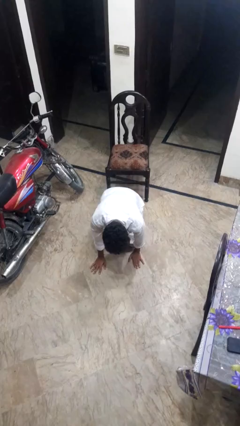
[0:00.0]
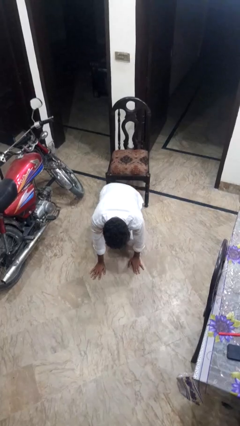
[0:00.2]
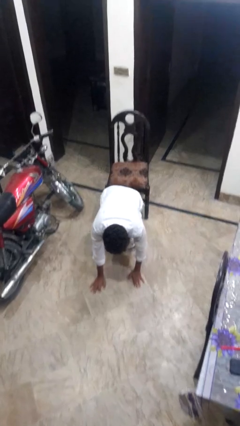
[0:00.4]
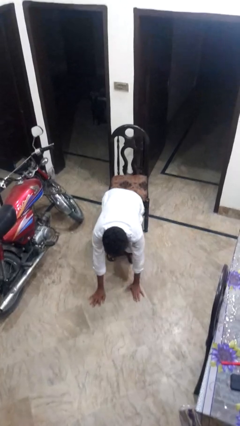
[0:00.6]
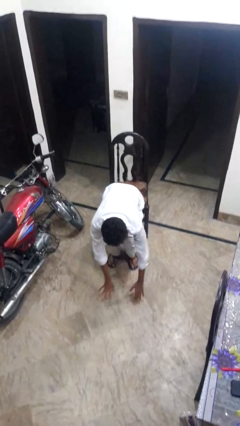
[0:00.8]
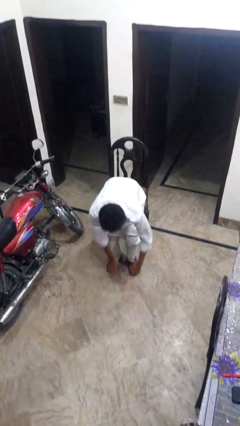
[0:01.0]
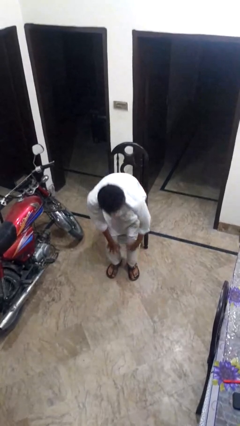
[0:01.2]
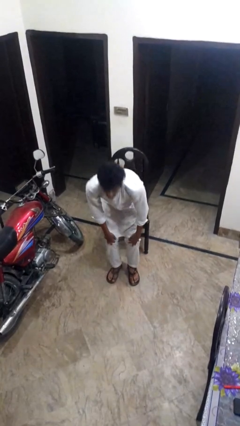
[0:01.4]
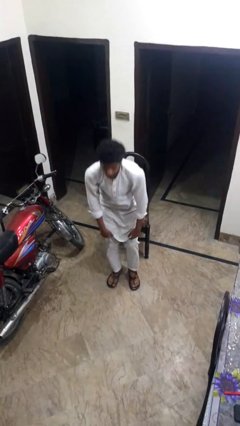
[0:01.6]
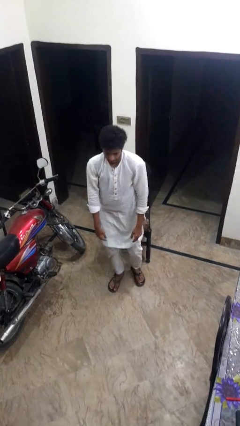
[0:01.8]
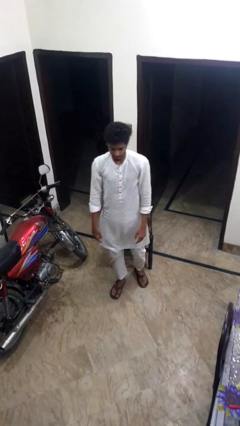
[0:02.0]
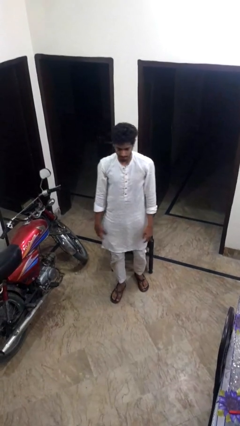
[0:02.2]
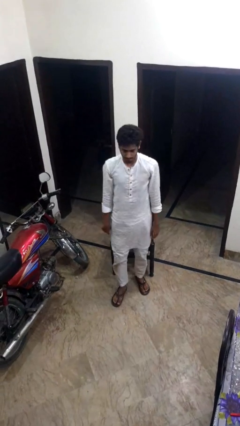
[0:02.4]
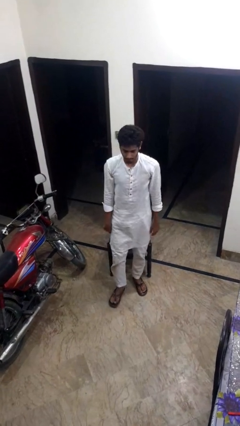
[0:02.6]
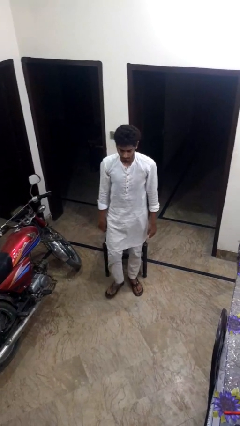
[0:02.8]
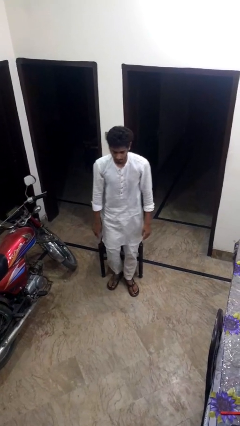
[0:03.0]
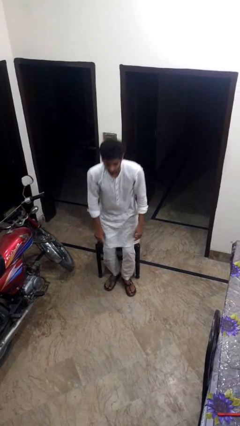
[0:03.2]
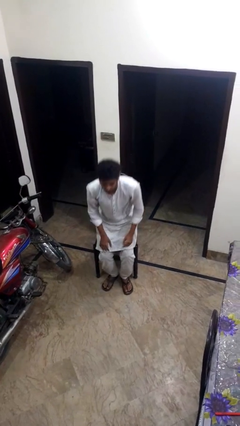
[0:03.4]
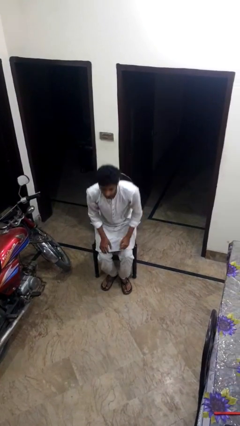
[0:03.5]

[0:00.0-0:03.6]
person stands up from floor

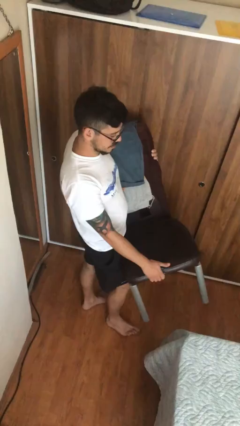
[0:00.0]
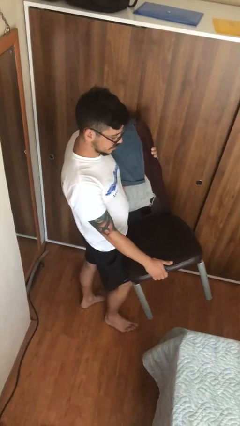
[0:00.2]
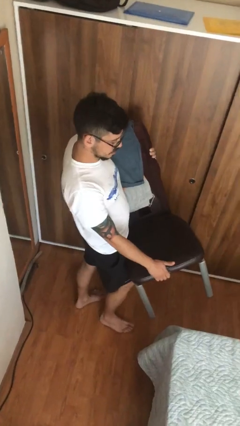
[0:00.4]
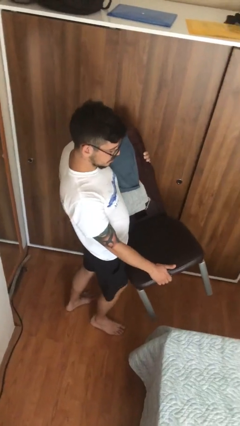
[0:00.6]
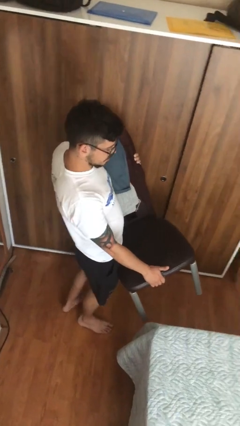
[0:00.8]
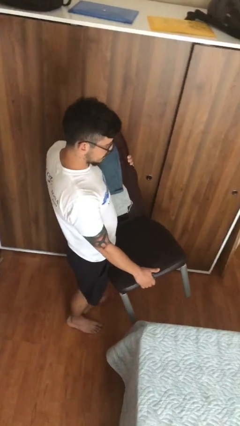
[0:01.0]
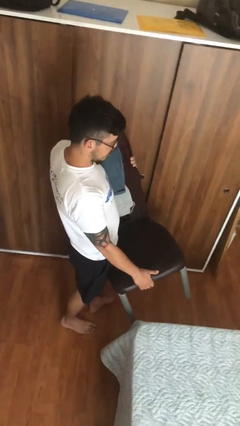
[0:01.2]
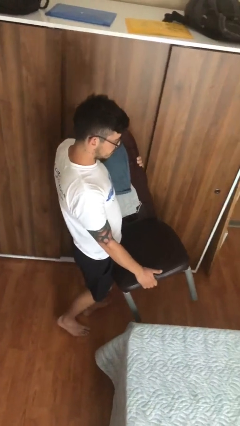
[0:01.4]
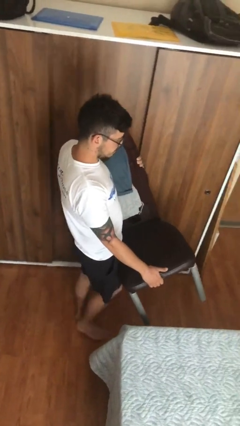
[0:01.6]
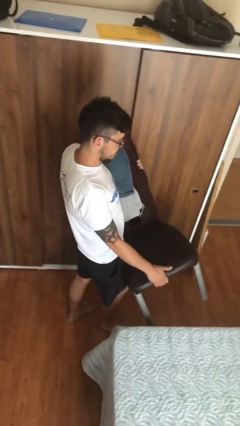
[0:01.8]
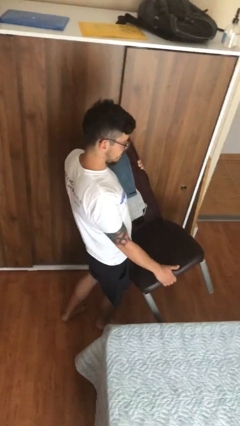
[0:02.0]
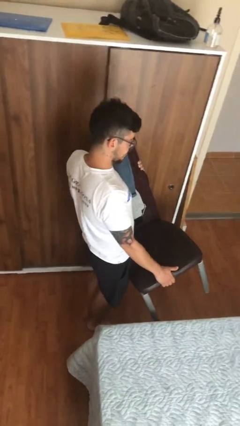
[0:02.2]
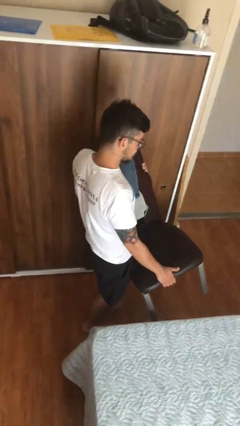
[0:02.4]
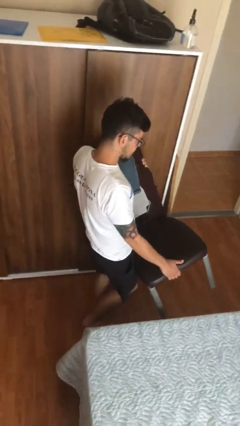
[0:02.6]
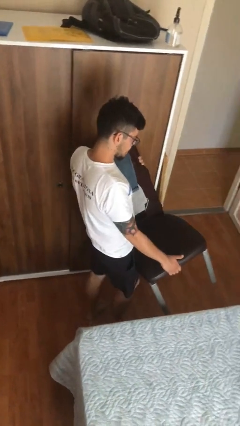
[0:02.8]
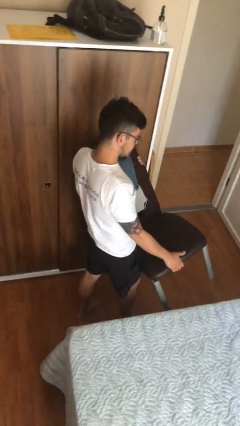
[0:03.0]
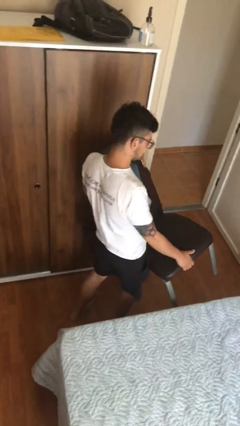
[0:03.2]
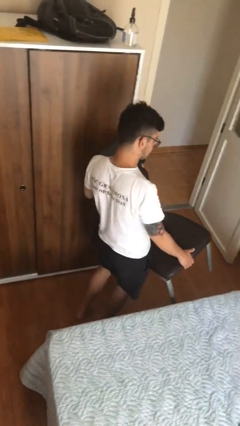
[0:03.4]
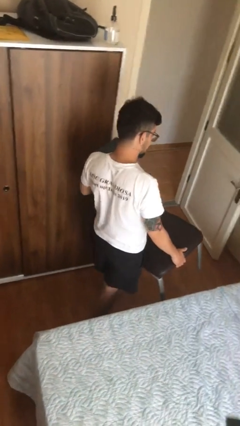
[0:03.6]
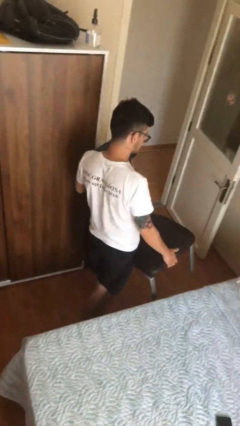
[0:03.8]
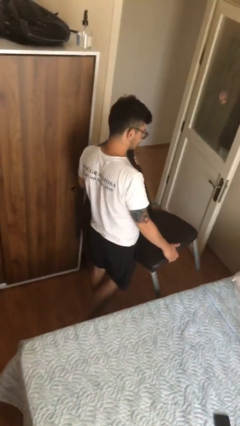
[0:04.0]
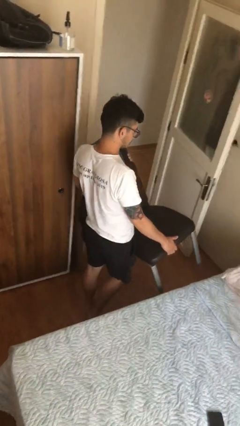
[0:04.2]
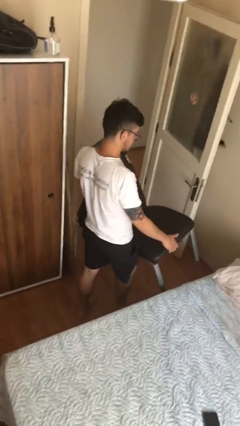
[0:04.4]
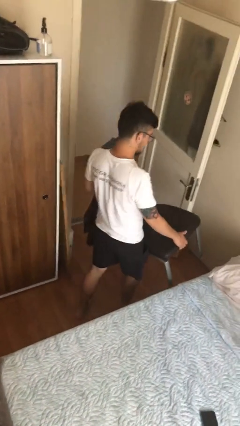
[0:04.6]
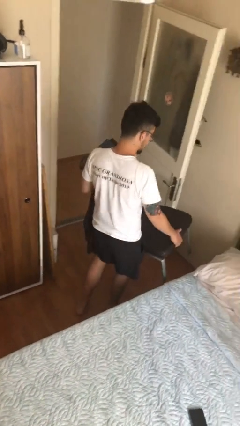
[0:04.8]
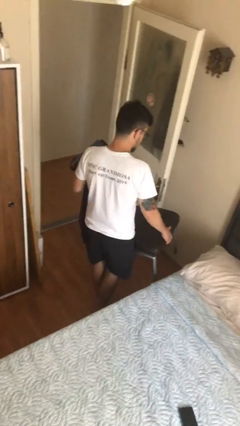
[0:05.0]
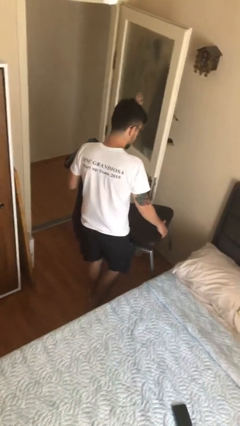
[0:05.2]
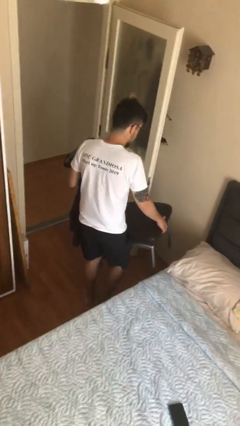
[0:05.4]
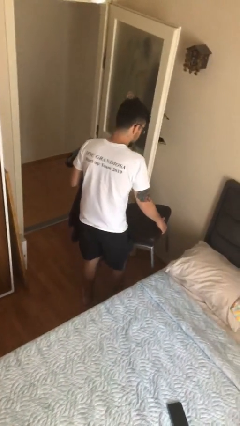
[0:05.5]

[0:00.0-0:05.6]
person carries heavy object

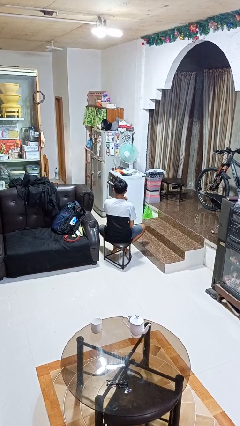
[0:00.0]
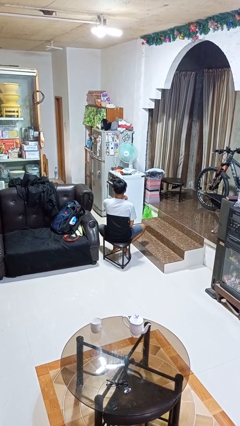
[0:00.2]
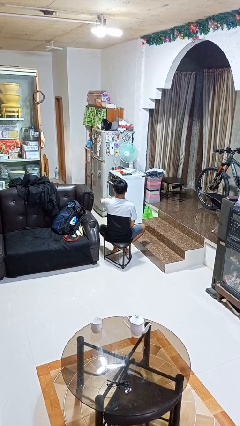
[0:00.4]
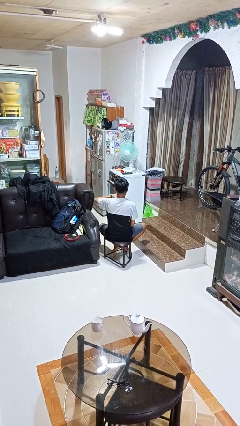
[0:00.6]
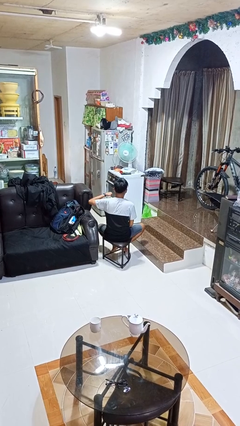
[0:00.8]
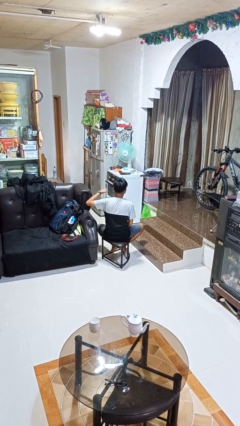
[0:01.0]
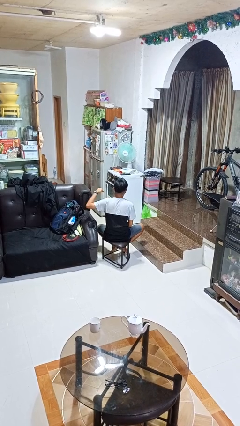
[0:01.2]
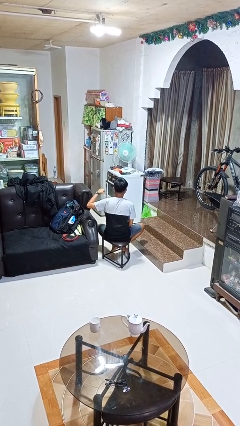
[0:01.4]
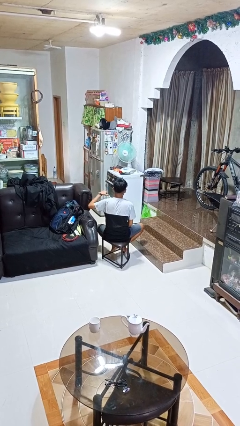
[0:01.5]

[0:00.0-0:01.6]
person gestures cut

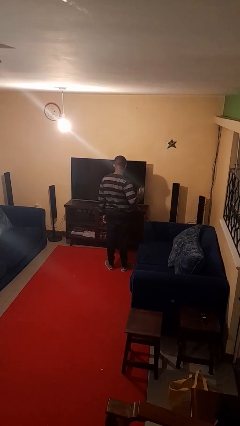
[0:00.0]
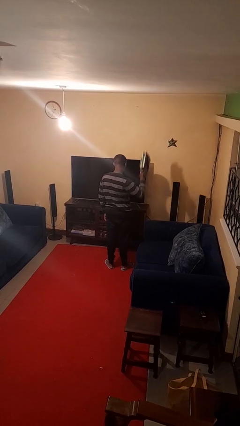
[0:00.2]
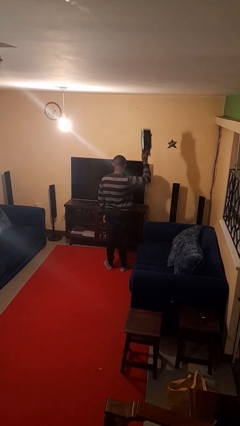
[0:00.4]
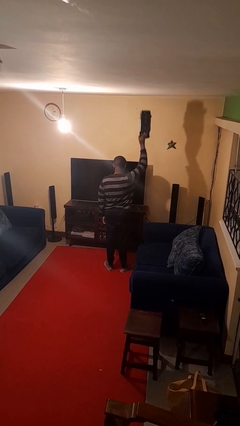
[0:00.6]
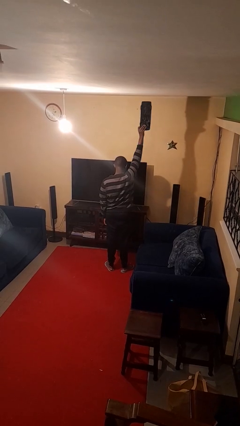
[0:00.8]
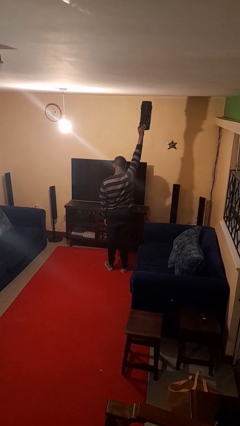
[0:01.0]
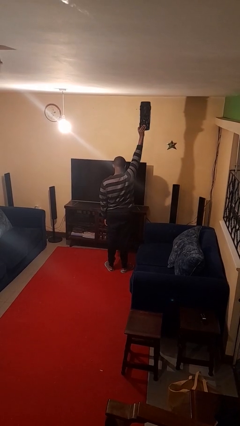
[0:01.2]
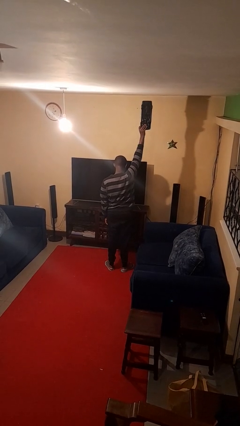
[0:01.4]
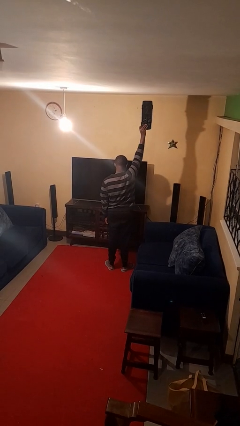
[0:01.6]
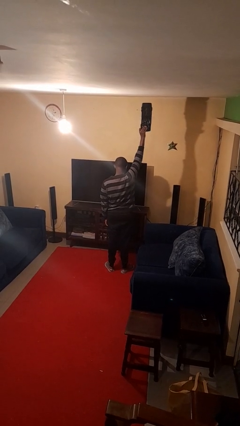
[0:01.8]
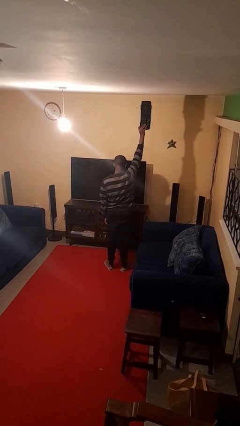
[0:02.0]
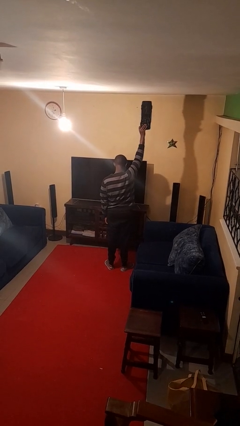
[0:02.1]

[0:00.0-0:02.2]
person holds object above head

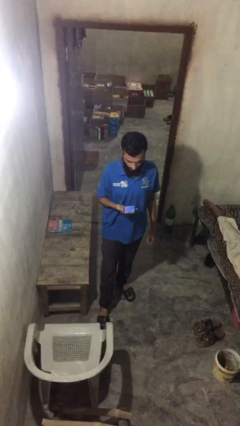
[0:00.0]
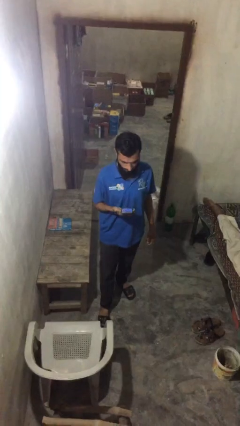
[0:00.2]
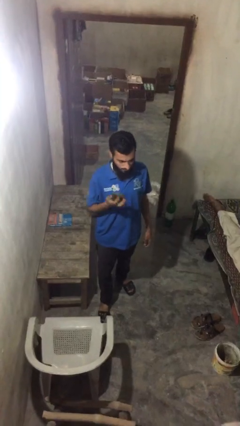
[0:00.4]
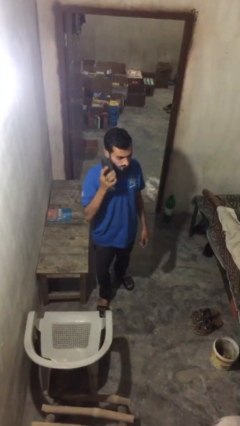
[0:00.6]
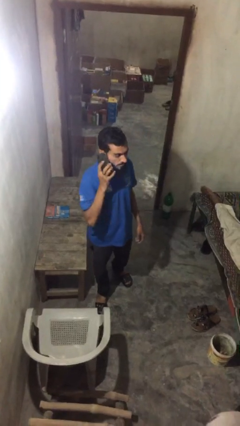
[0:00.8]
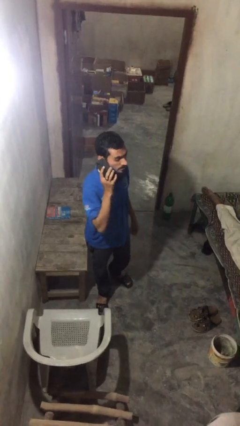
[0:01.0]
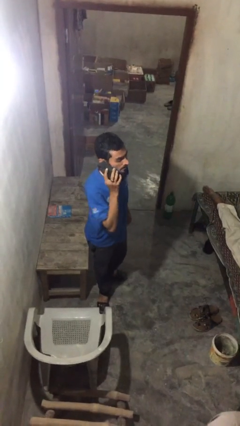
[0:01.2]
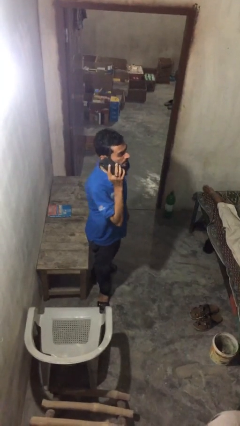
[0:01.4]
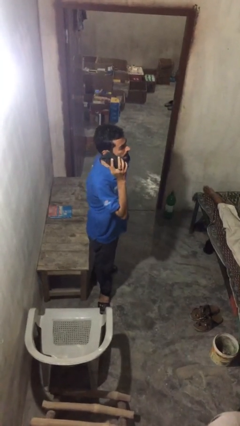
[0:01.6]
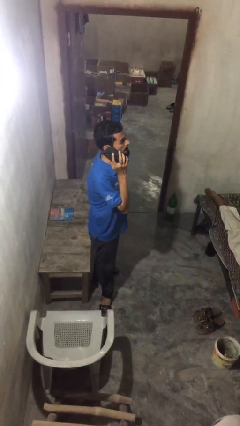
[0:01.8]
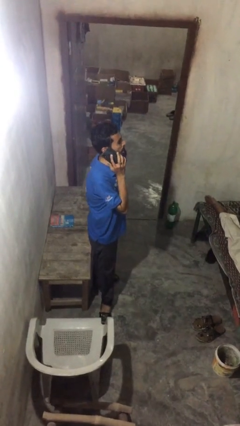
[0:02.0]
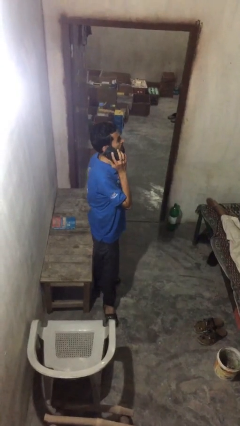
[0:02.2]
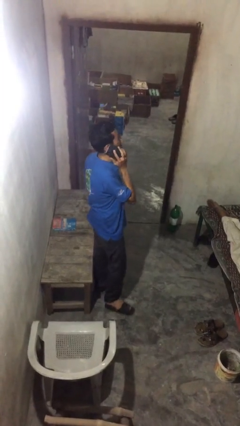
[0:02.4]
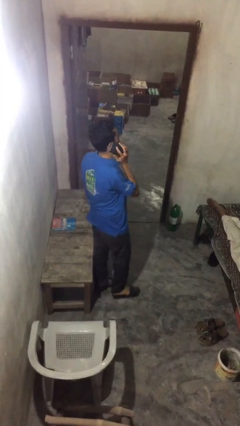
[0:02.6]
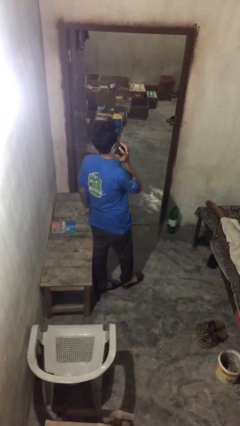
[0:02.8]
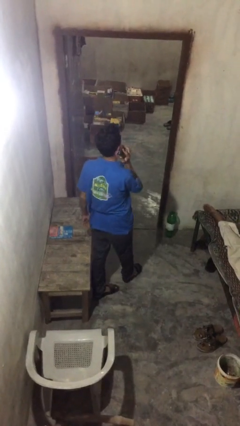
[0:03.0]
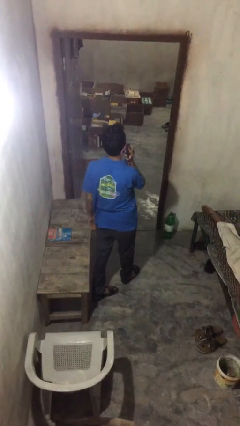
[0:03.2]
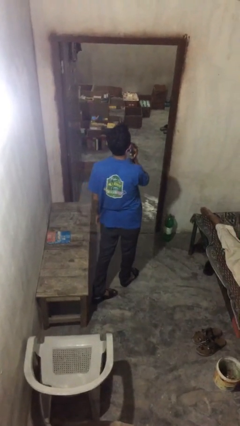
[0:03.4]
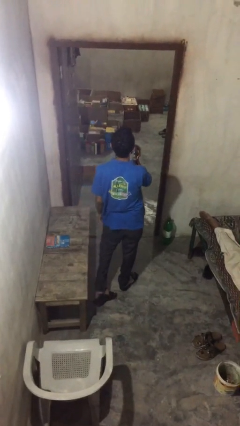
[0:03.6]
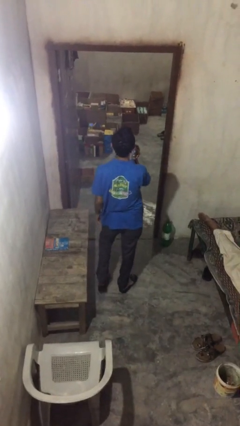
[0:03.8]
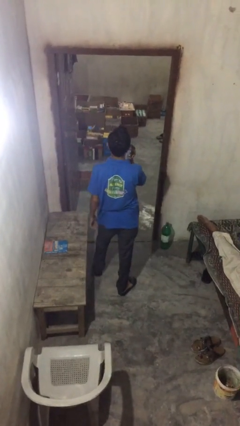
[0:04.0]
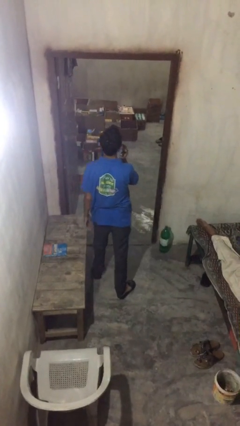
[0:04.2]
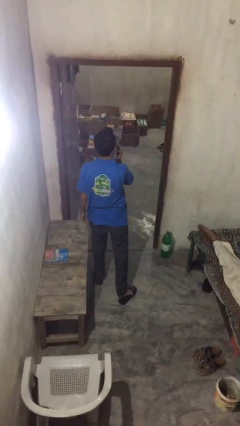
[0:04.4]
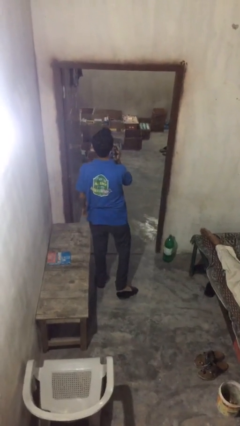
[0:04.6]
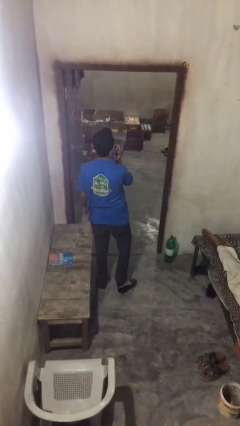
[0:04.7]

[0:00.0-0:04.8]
person talks on phone
